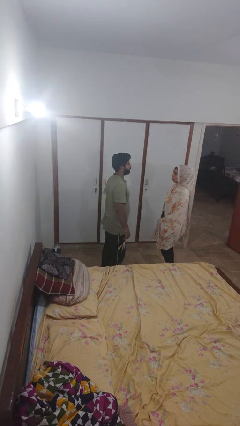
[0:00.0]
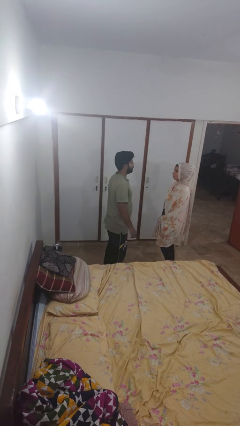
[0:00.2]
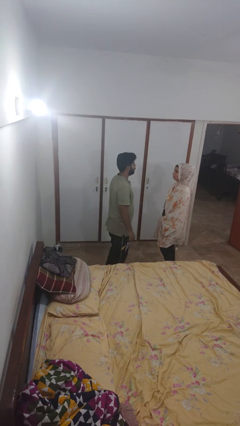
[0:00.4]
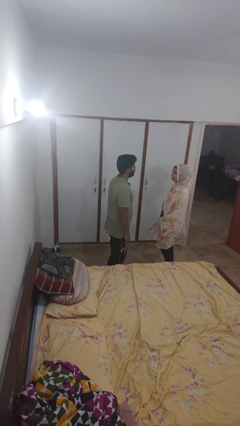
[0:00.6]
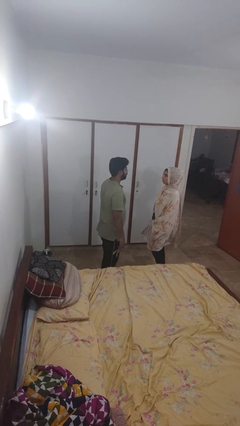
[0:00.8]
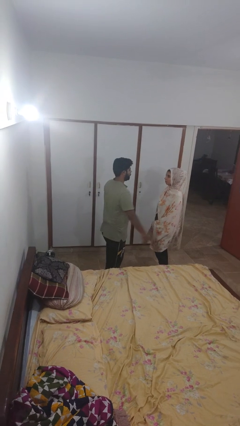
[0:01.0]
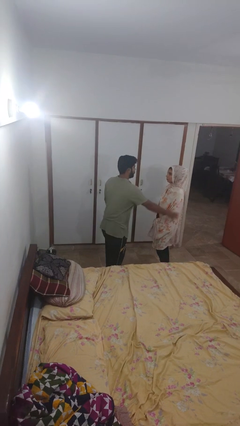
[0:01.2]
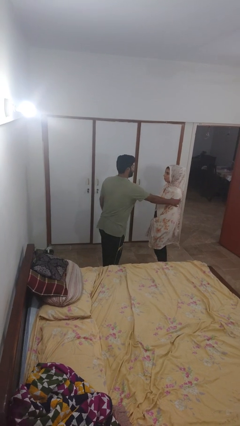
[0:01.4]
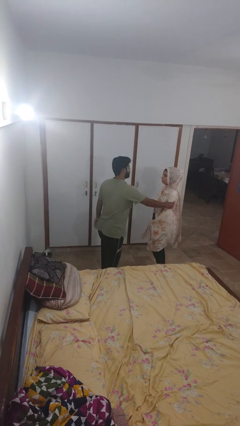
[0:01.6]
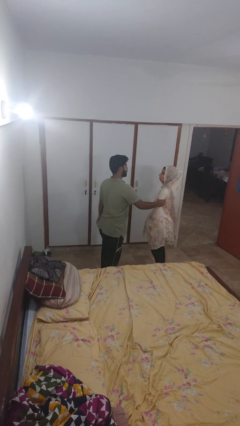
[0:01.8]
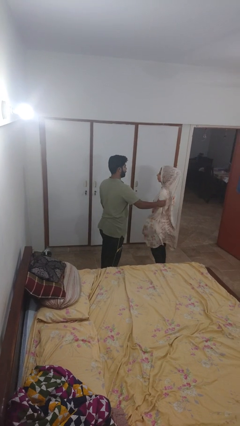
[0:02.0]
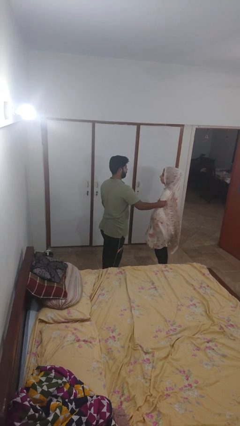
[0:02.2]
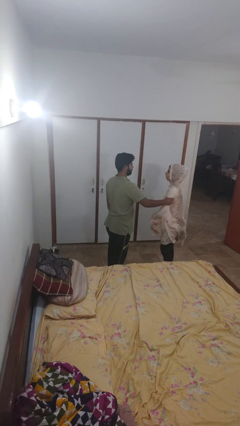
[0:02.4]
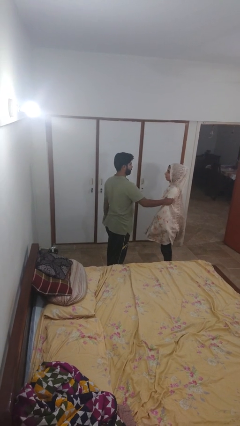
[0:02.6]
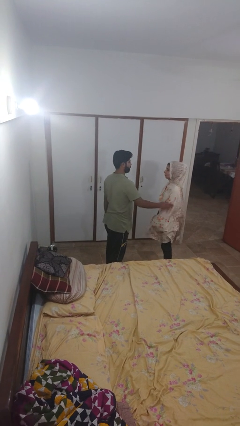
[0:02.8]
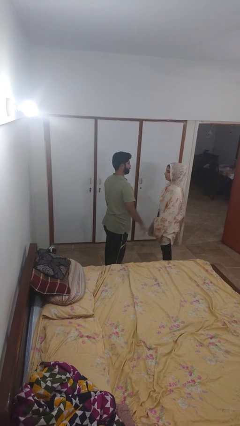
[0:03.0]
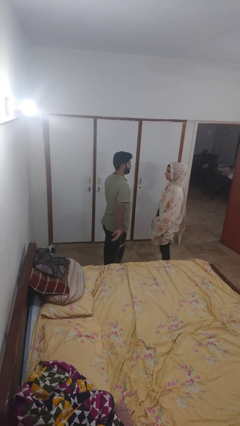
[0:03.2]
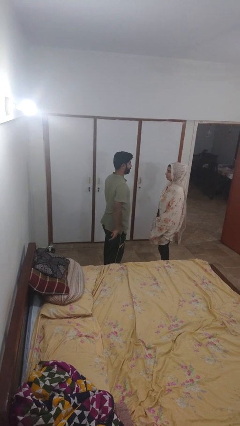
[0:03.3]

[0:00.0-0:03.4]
person grabs person by bicep

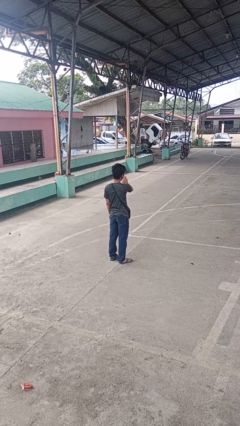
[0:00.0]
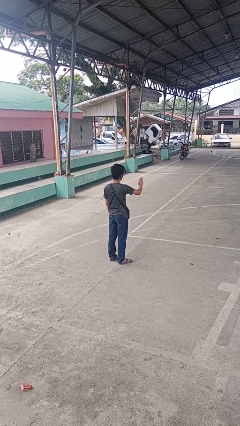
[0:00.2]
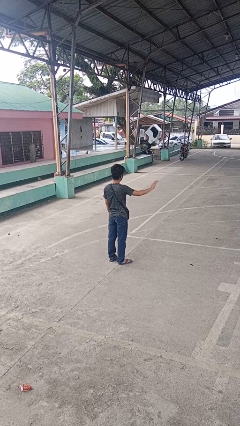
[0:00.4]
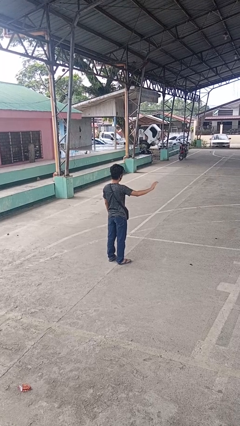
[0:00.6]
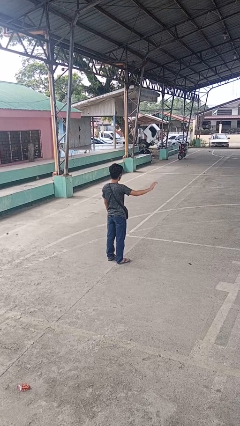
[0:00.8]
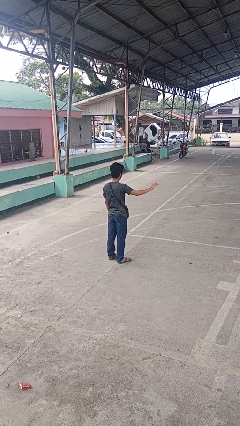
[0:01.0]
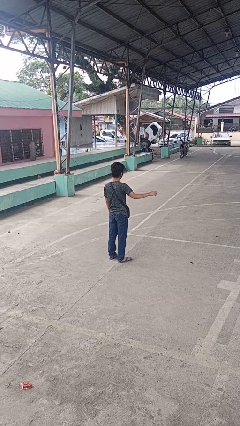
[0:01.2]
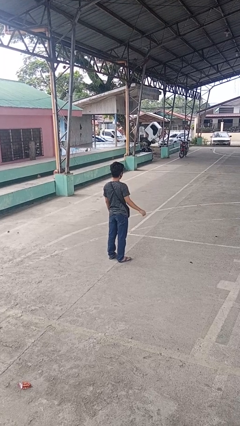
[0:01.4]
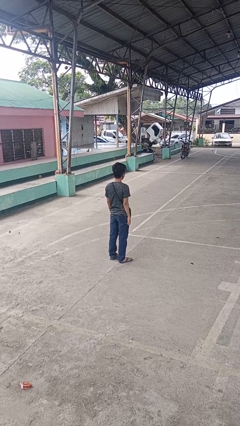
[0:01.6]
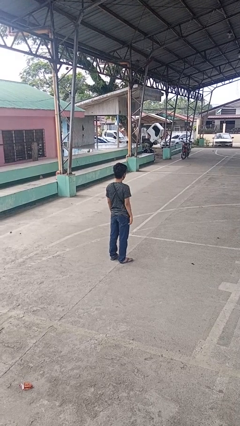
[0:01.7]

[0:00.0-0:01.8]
person gestures swipe right

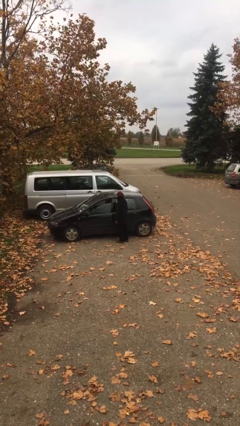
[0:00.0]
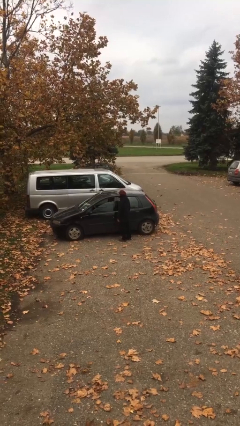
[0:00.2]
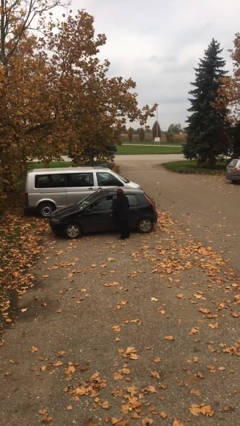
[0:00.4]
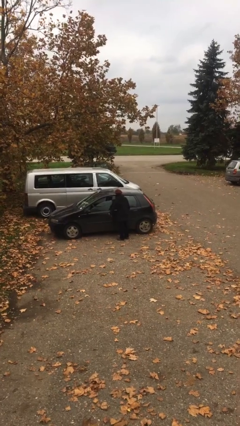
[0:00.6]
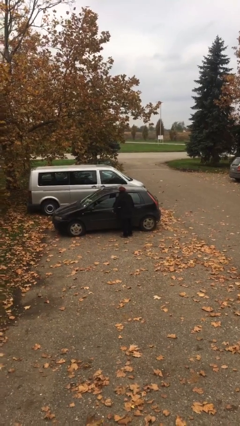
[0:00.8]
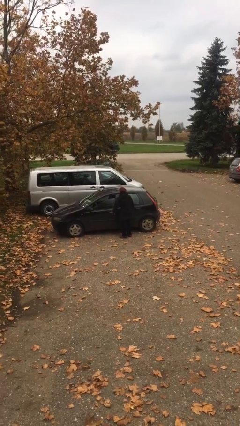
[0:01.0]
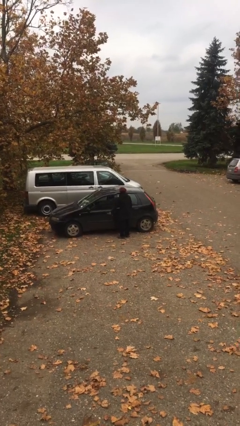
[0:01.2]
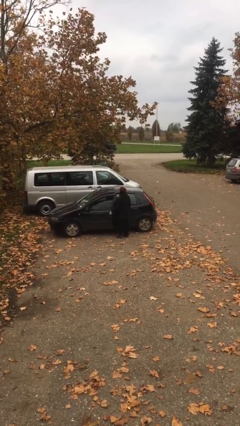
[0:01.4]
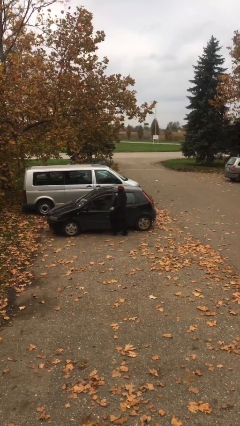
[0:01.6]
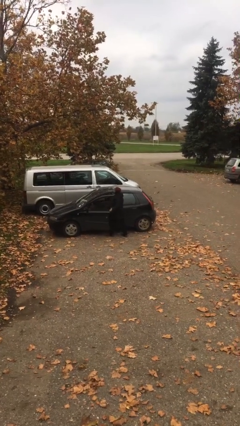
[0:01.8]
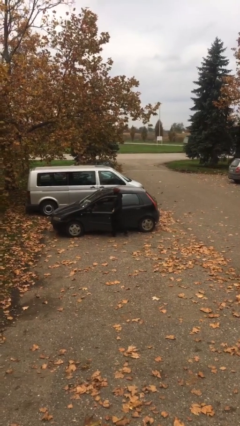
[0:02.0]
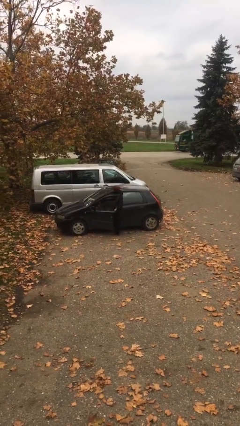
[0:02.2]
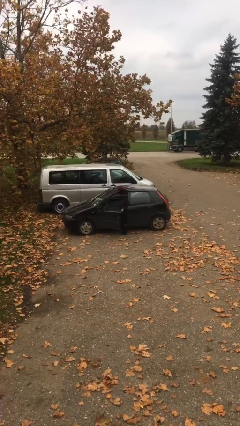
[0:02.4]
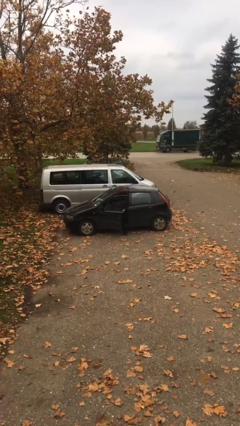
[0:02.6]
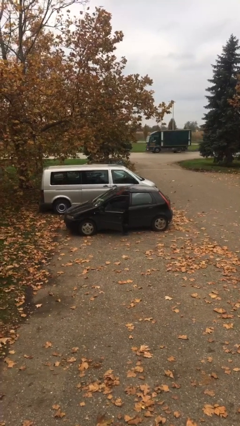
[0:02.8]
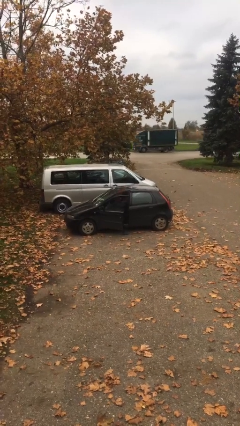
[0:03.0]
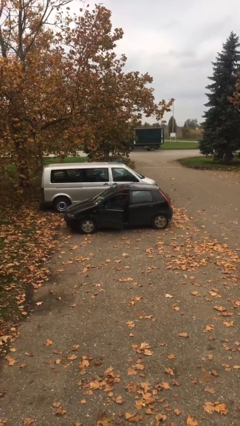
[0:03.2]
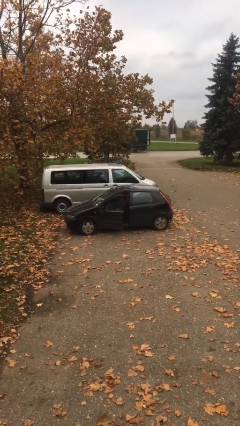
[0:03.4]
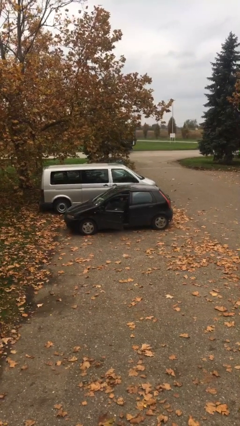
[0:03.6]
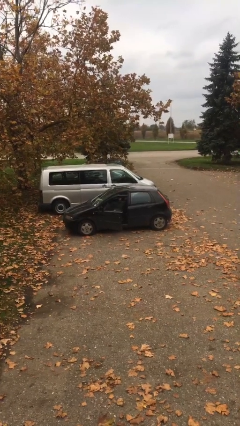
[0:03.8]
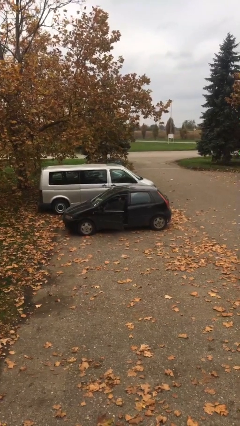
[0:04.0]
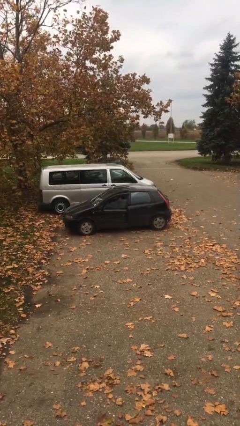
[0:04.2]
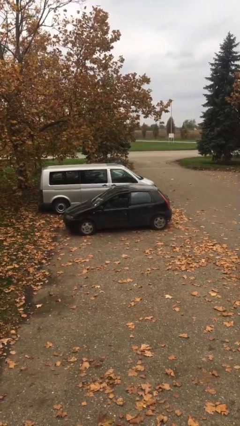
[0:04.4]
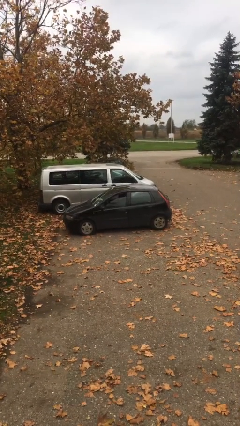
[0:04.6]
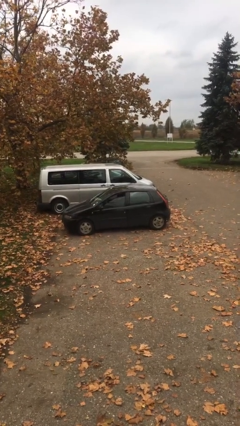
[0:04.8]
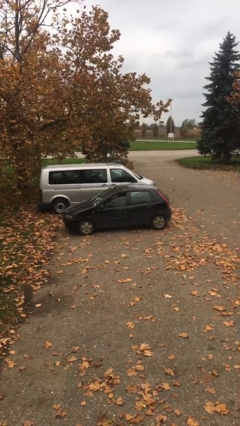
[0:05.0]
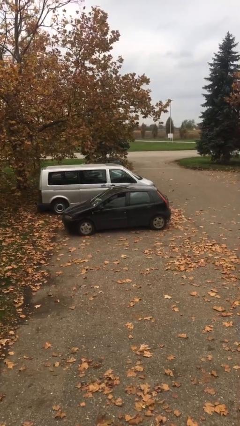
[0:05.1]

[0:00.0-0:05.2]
person enters car

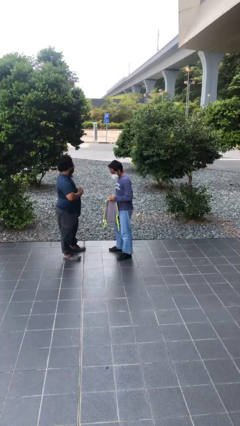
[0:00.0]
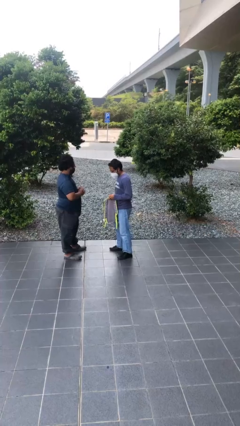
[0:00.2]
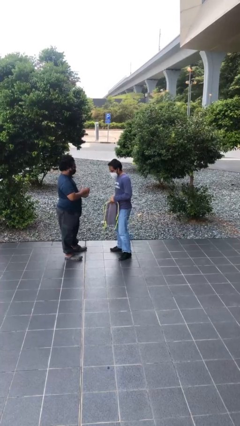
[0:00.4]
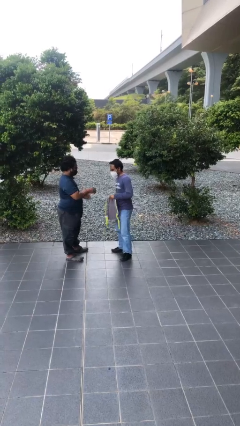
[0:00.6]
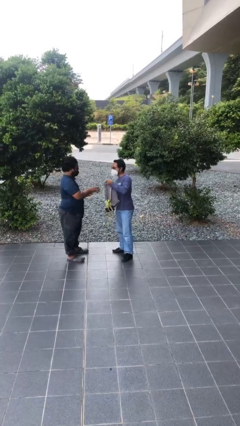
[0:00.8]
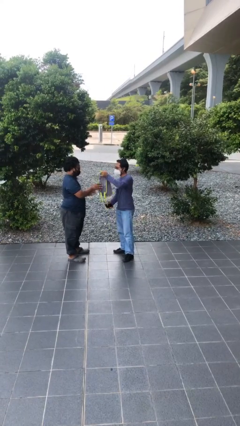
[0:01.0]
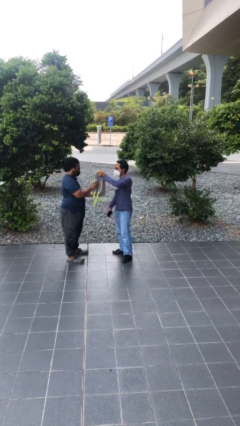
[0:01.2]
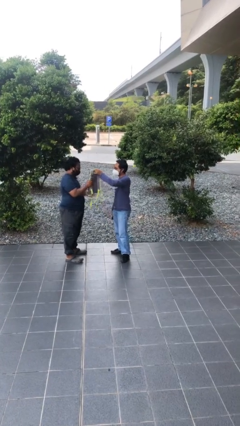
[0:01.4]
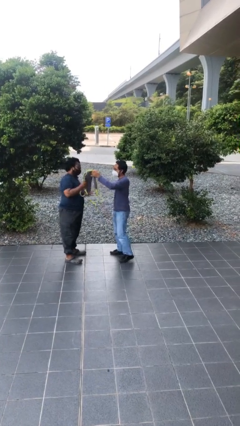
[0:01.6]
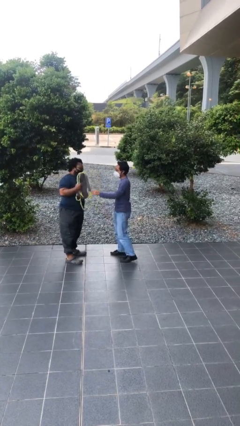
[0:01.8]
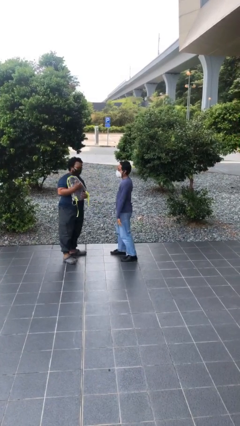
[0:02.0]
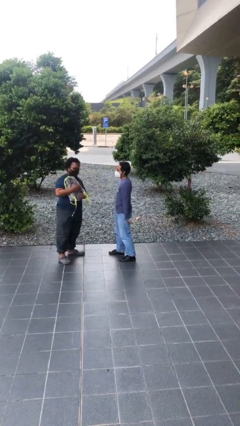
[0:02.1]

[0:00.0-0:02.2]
person transfers object to person

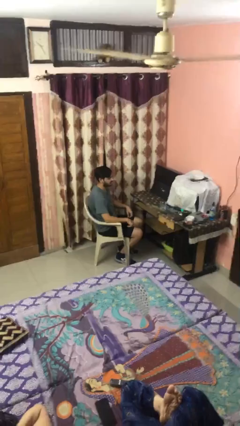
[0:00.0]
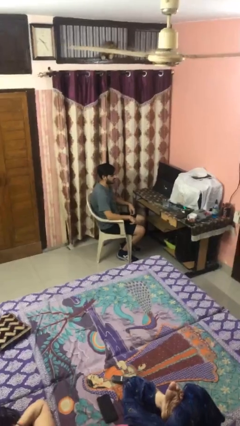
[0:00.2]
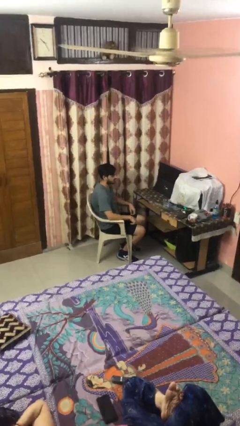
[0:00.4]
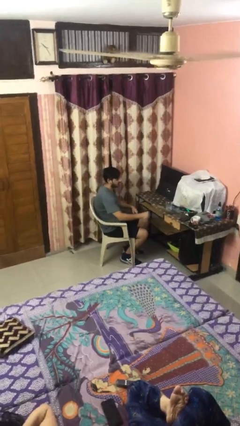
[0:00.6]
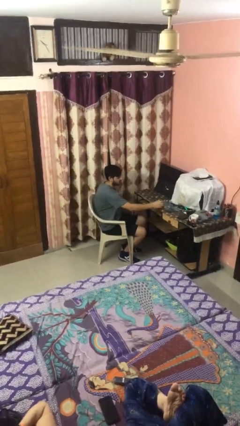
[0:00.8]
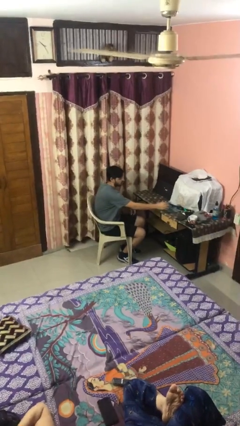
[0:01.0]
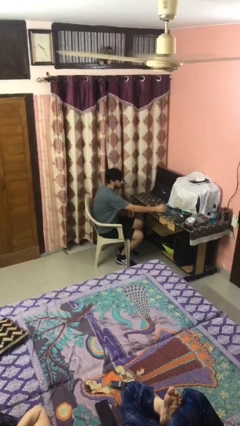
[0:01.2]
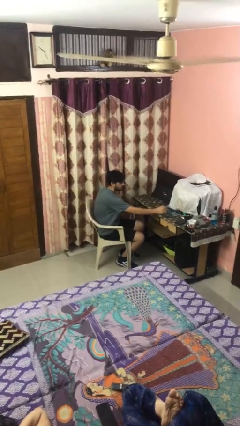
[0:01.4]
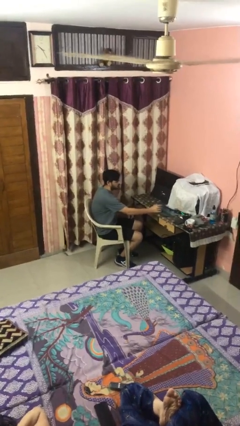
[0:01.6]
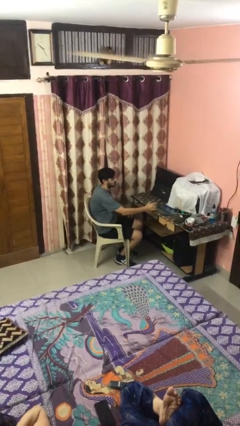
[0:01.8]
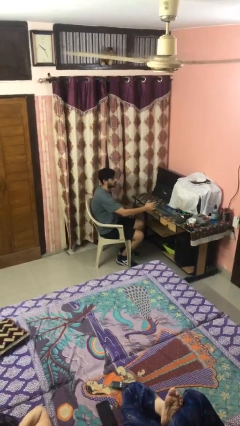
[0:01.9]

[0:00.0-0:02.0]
person picks up object from table

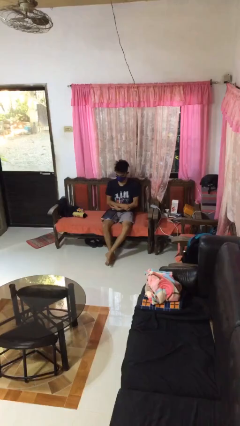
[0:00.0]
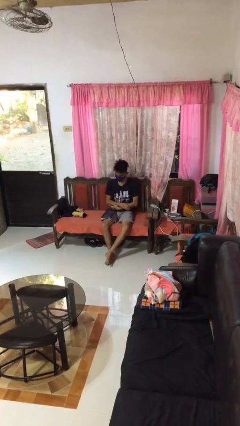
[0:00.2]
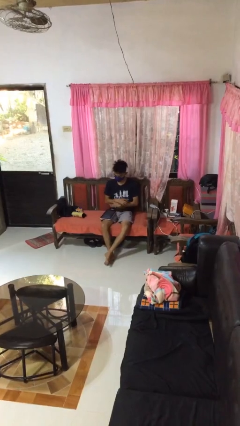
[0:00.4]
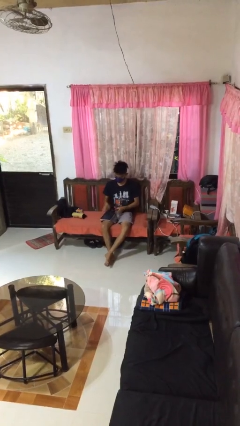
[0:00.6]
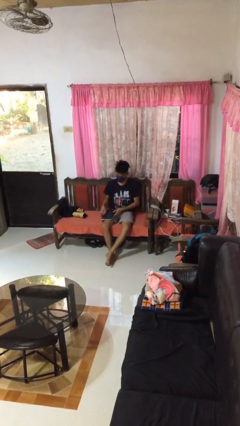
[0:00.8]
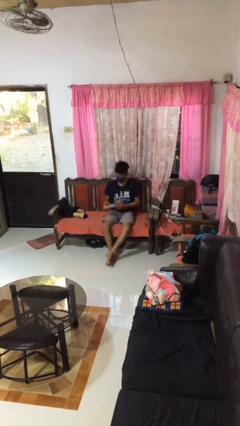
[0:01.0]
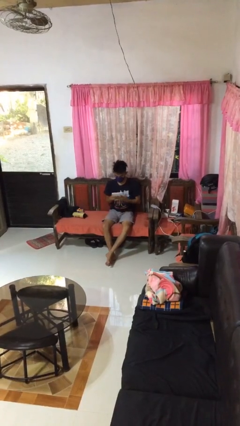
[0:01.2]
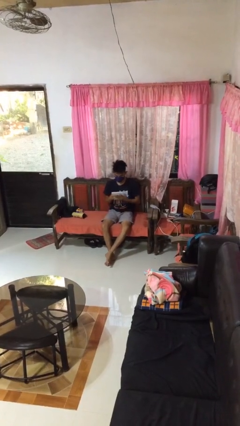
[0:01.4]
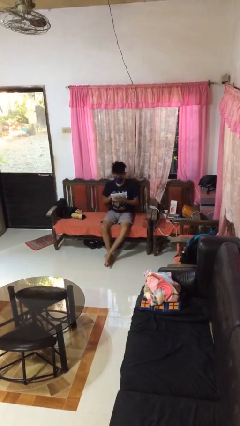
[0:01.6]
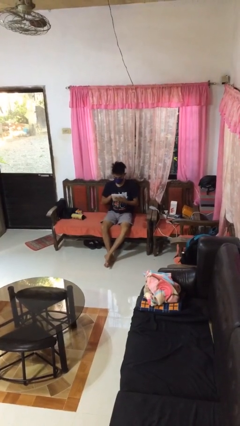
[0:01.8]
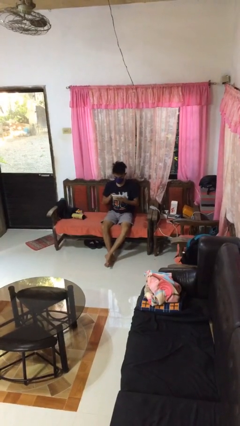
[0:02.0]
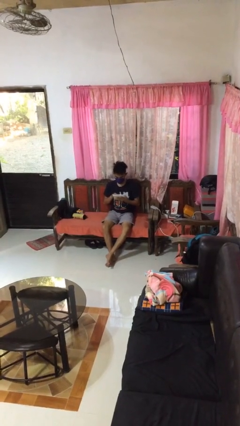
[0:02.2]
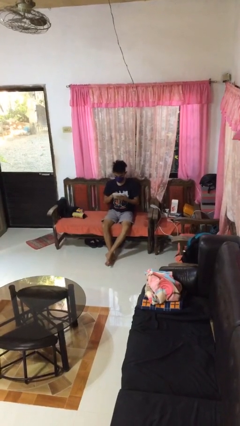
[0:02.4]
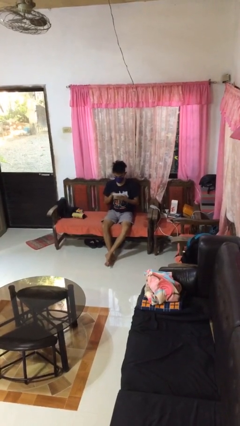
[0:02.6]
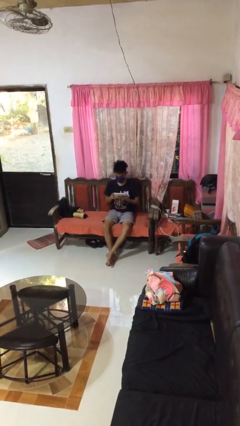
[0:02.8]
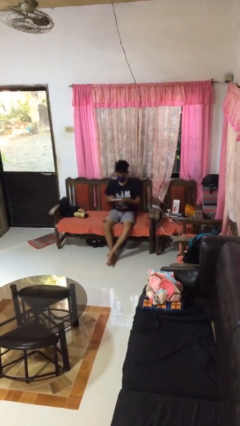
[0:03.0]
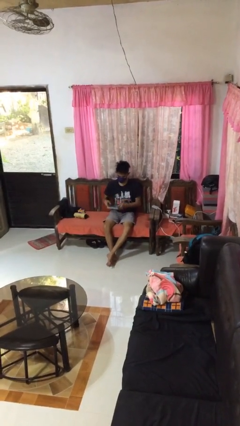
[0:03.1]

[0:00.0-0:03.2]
person interacts with tablet
